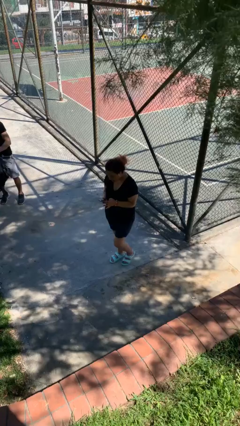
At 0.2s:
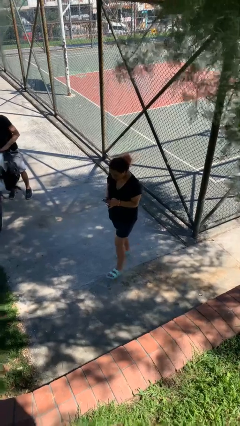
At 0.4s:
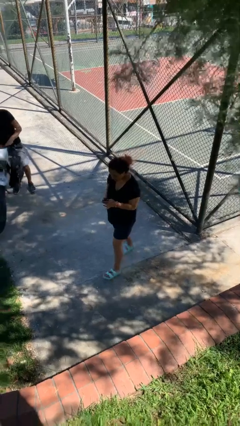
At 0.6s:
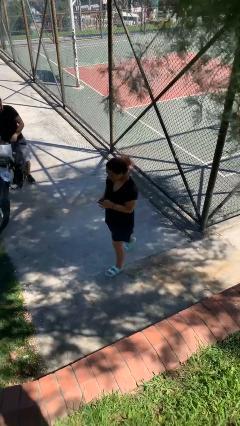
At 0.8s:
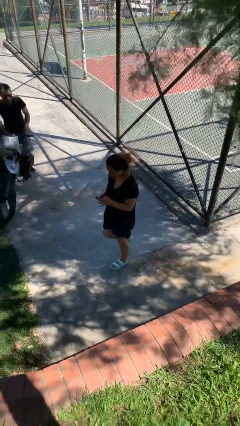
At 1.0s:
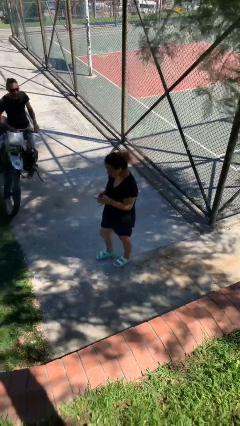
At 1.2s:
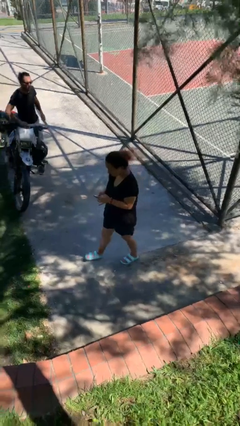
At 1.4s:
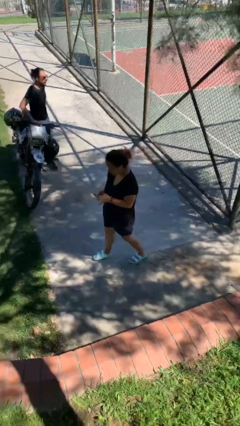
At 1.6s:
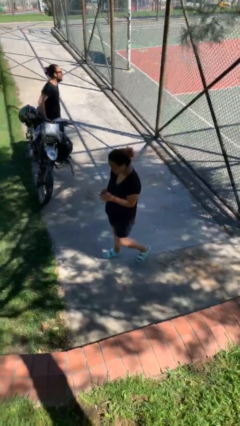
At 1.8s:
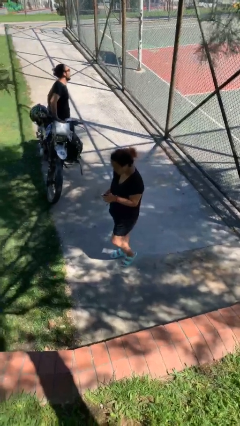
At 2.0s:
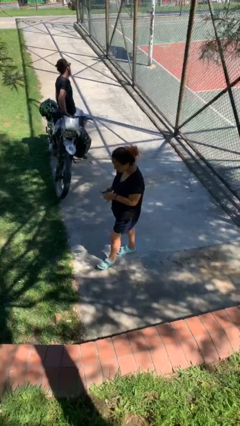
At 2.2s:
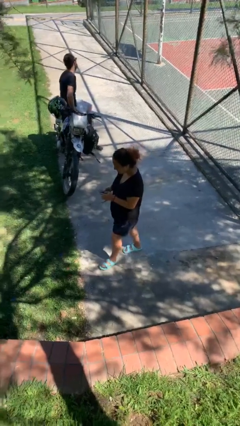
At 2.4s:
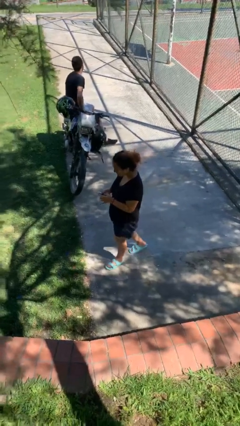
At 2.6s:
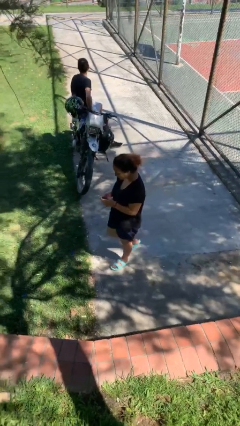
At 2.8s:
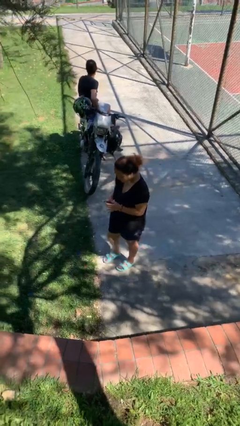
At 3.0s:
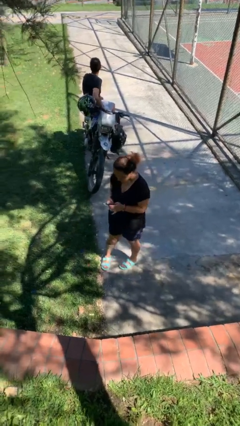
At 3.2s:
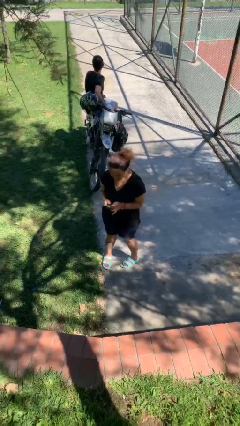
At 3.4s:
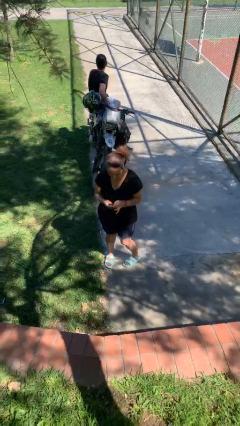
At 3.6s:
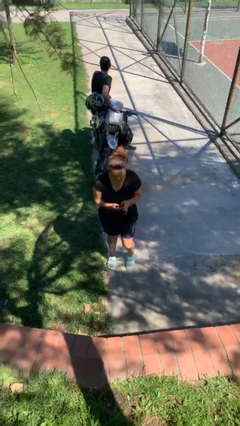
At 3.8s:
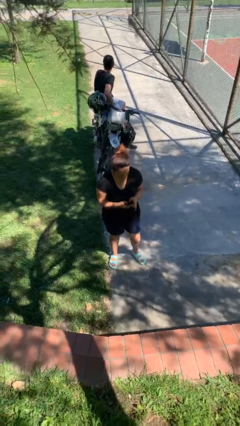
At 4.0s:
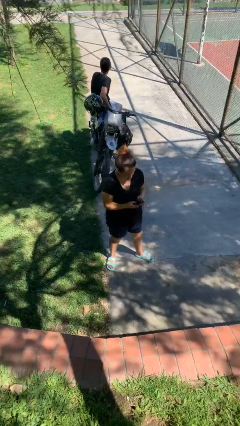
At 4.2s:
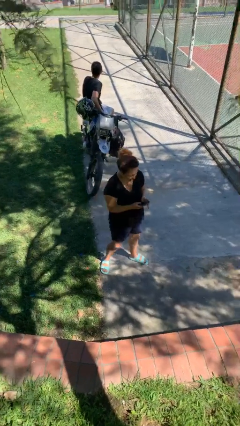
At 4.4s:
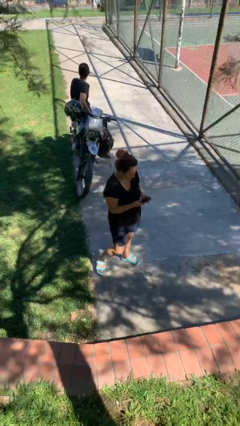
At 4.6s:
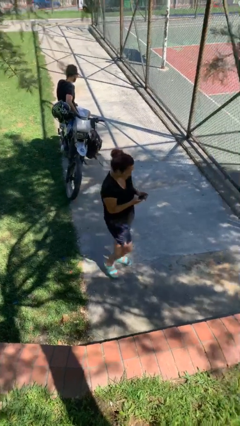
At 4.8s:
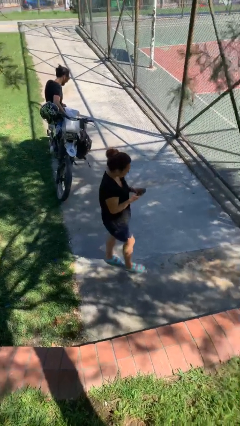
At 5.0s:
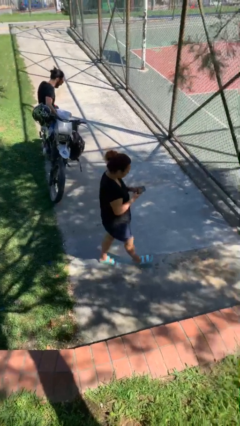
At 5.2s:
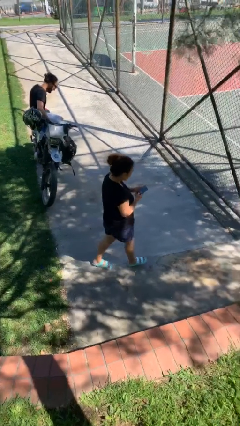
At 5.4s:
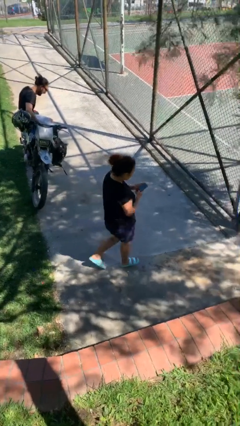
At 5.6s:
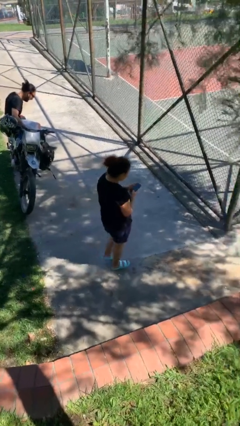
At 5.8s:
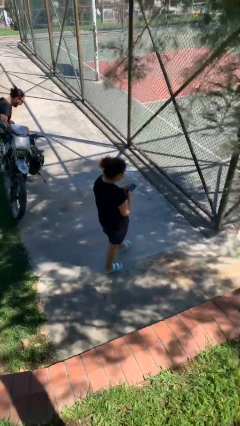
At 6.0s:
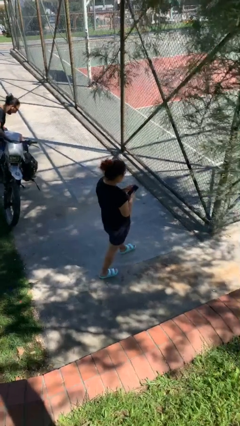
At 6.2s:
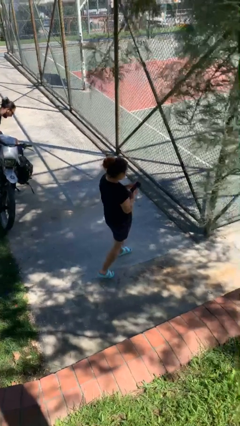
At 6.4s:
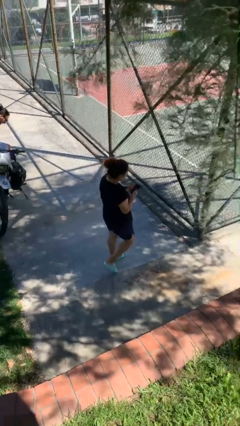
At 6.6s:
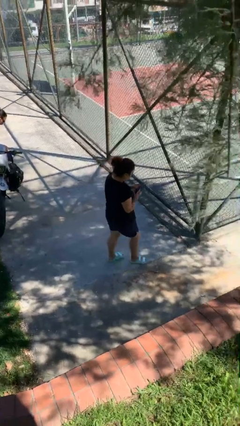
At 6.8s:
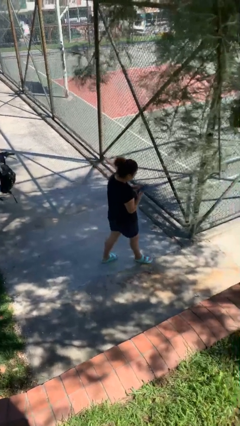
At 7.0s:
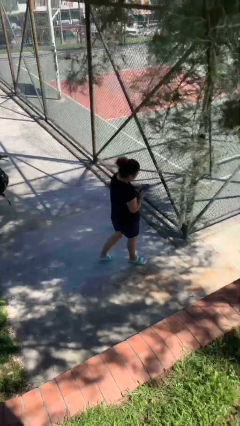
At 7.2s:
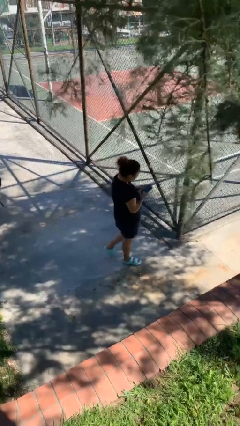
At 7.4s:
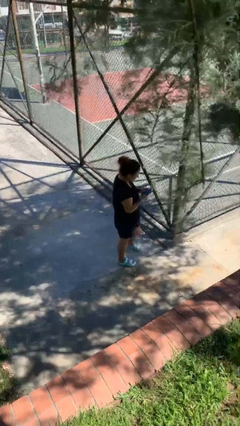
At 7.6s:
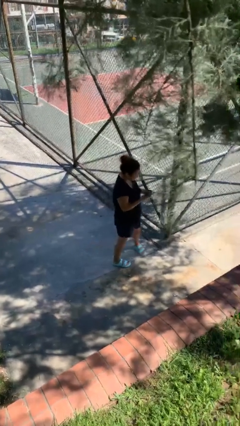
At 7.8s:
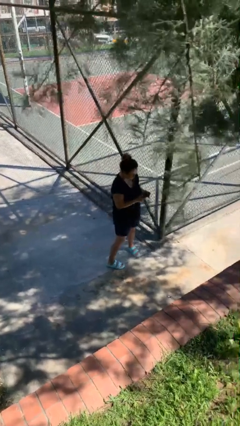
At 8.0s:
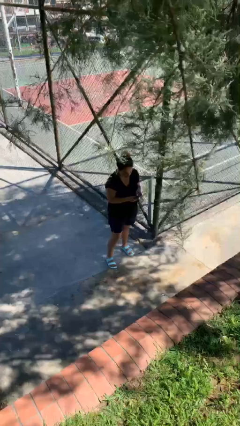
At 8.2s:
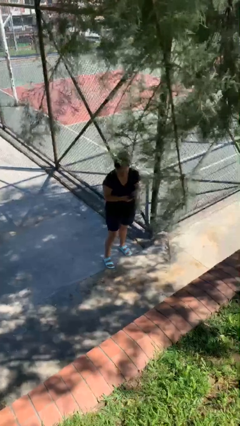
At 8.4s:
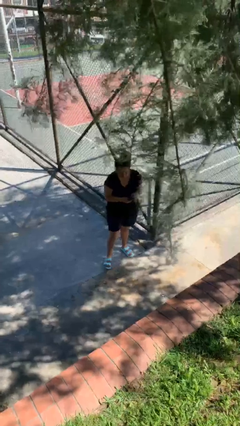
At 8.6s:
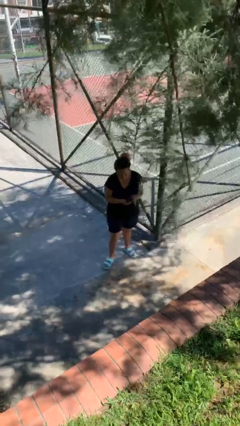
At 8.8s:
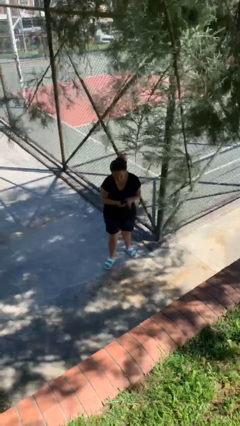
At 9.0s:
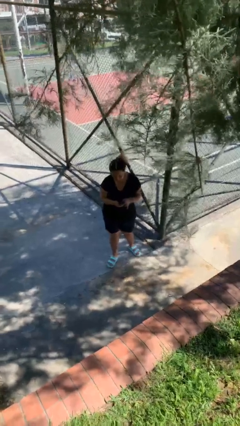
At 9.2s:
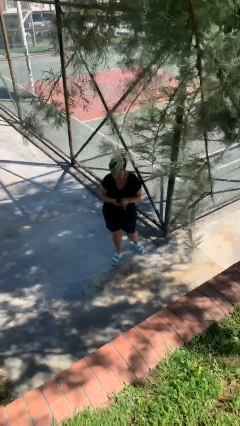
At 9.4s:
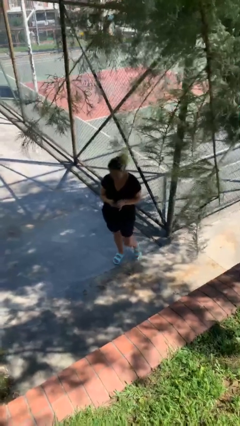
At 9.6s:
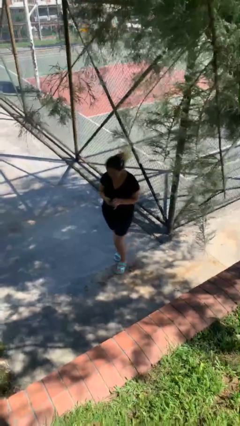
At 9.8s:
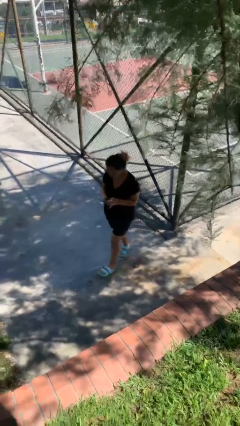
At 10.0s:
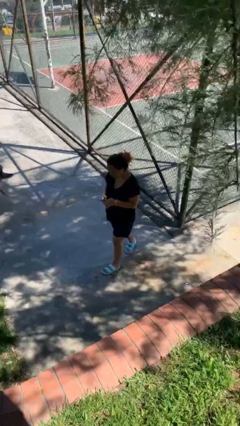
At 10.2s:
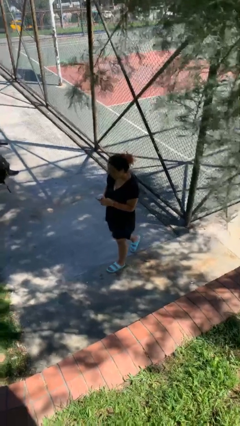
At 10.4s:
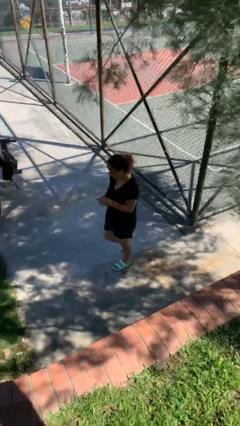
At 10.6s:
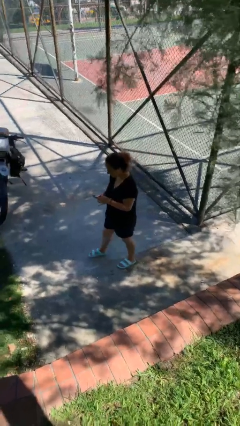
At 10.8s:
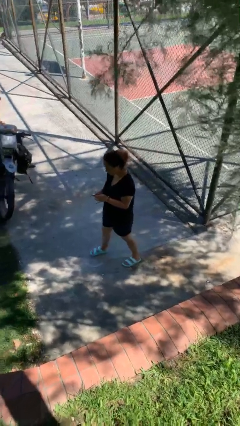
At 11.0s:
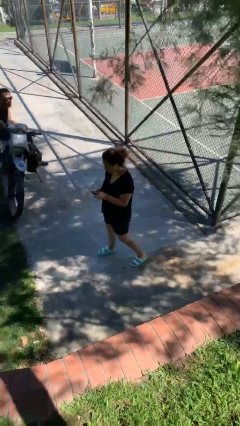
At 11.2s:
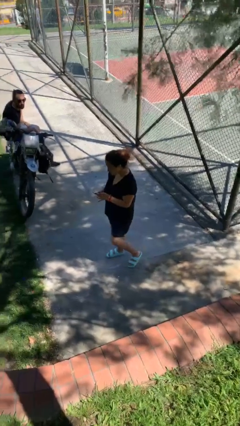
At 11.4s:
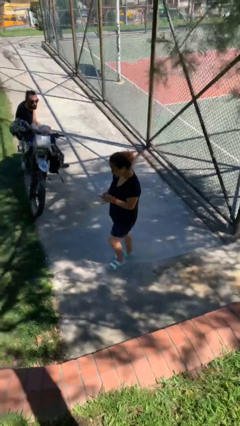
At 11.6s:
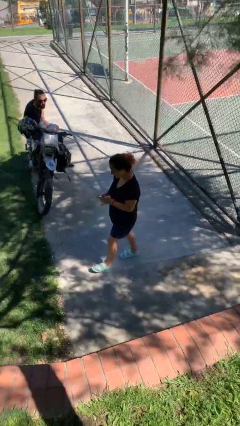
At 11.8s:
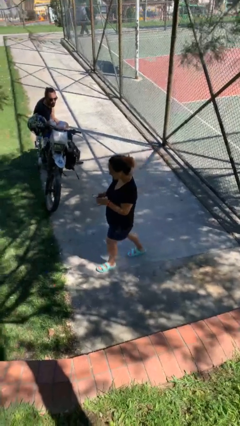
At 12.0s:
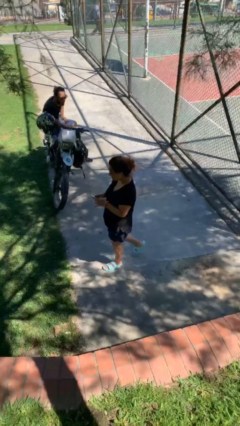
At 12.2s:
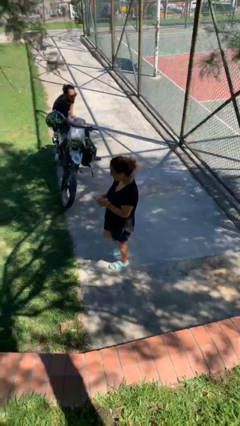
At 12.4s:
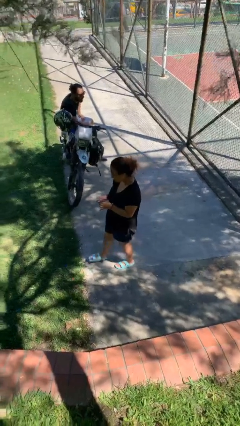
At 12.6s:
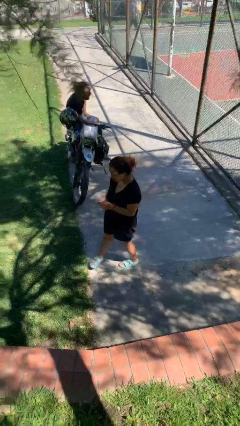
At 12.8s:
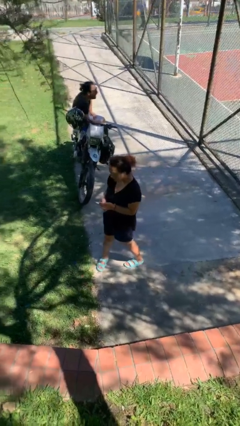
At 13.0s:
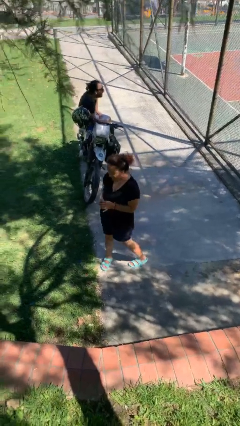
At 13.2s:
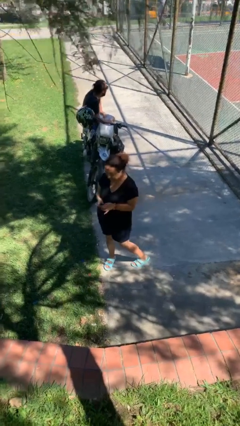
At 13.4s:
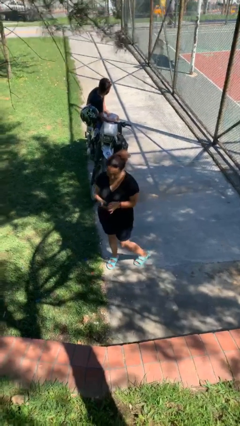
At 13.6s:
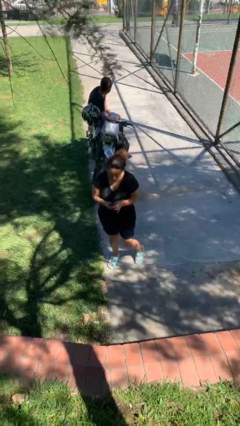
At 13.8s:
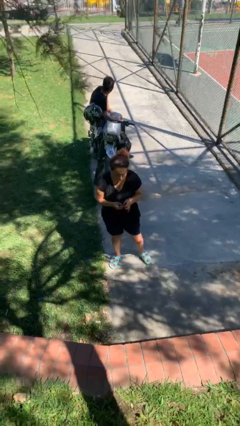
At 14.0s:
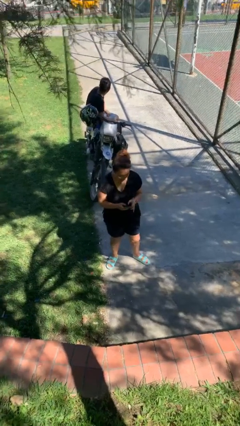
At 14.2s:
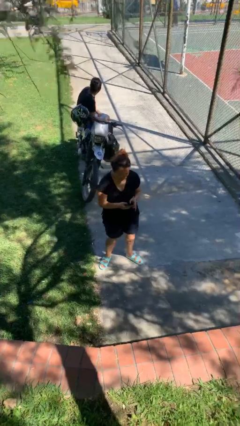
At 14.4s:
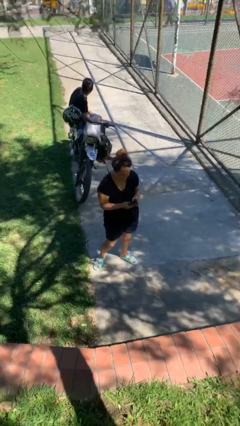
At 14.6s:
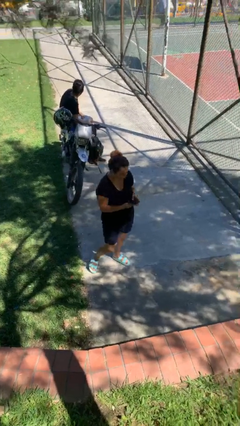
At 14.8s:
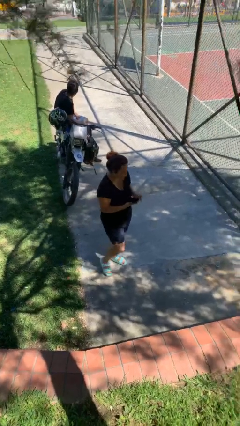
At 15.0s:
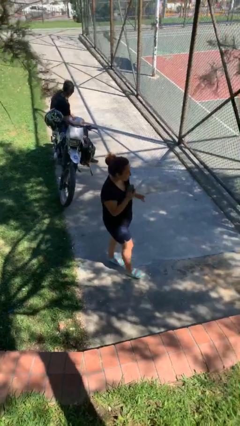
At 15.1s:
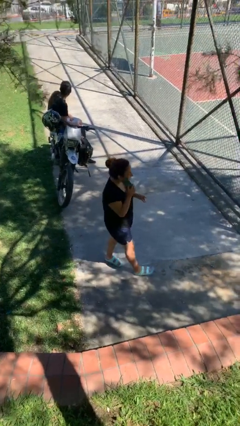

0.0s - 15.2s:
person texts on phone

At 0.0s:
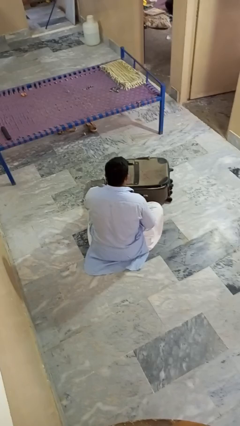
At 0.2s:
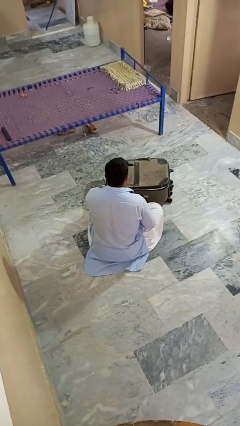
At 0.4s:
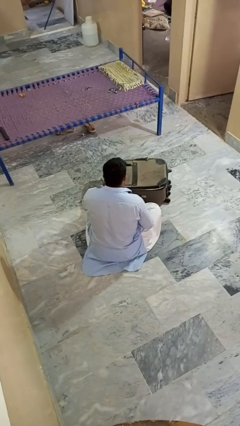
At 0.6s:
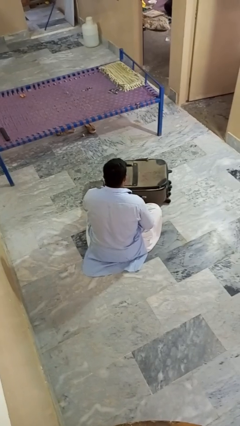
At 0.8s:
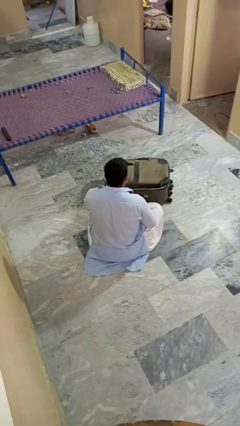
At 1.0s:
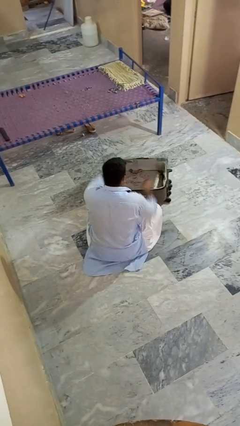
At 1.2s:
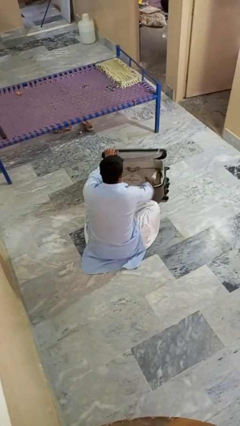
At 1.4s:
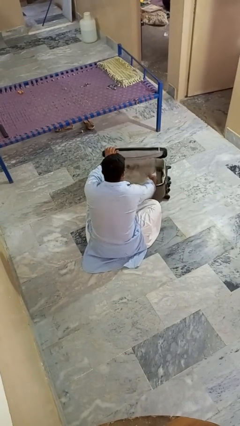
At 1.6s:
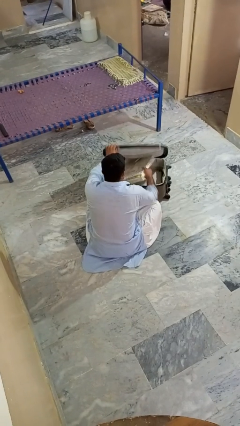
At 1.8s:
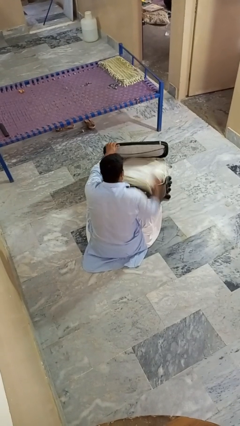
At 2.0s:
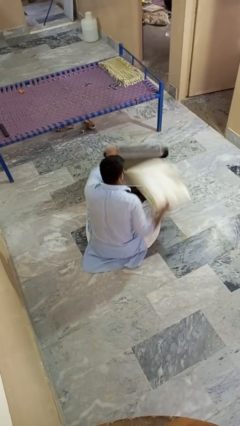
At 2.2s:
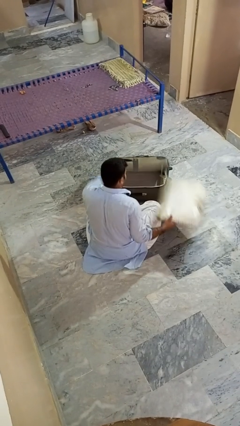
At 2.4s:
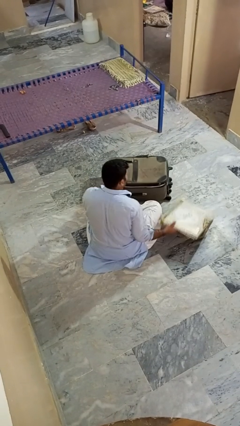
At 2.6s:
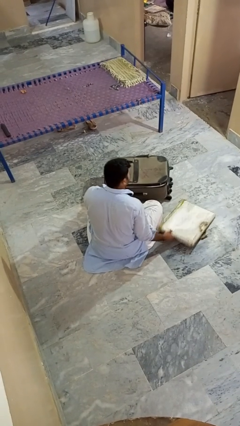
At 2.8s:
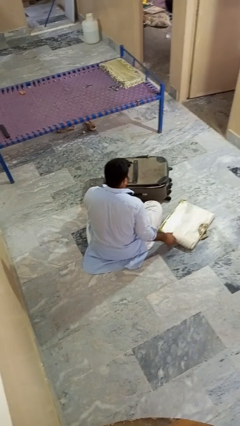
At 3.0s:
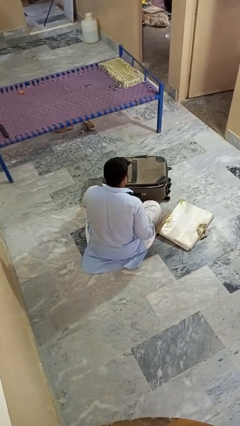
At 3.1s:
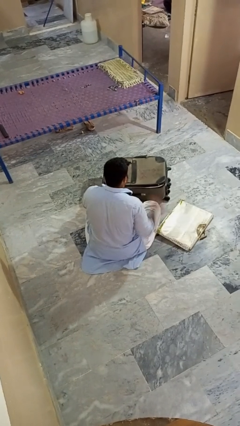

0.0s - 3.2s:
person takes object from bag
